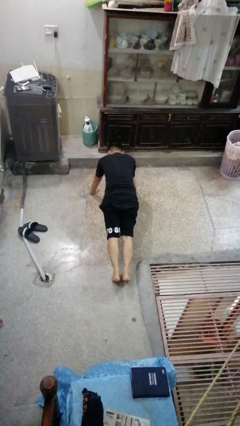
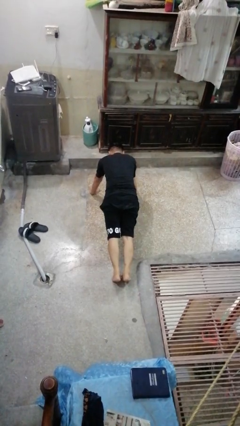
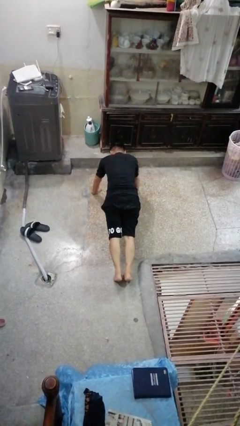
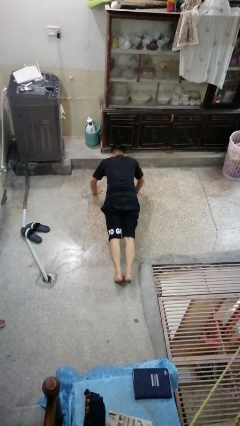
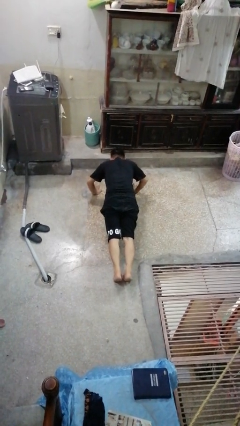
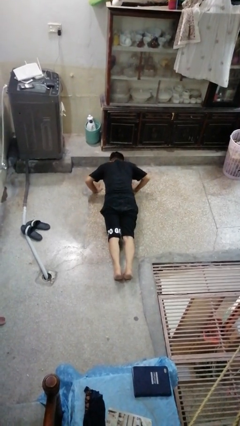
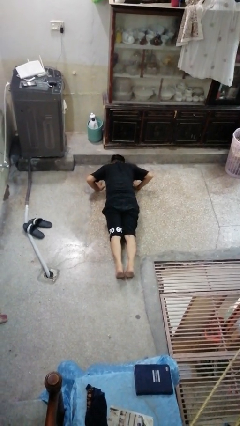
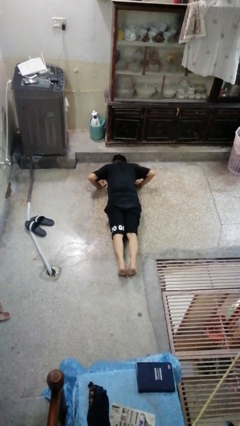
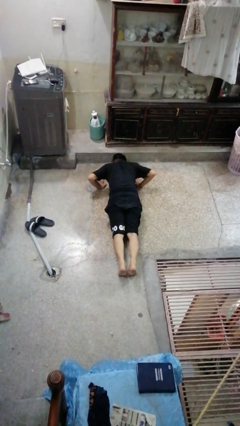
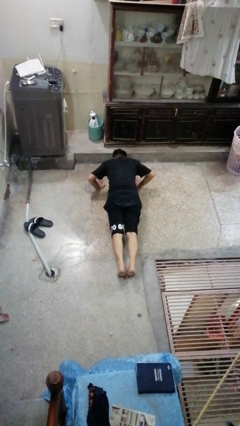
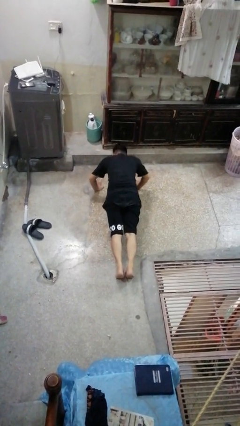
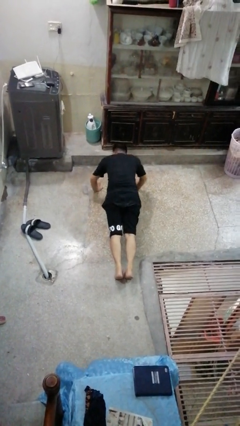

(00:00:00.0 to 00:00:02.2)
person exercises with pushup

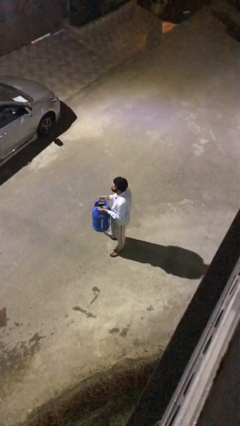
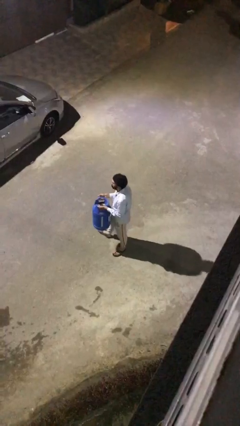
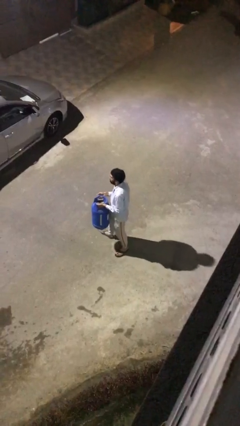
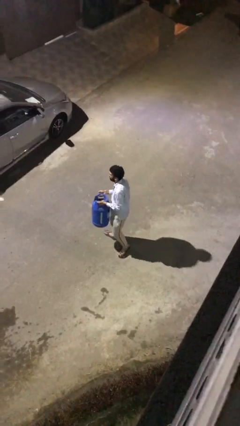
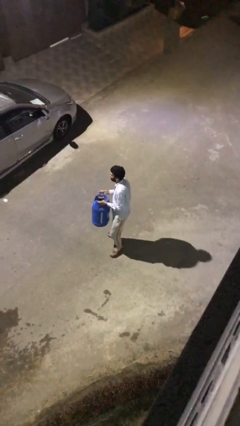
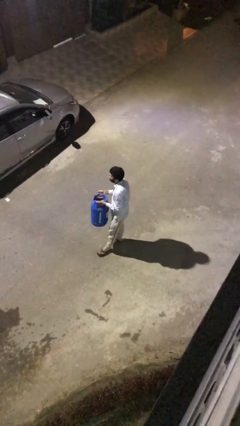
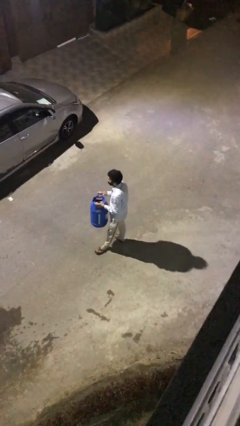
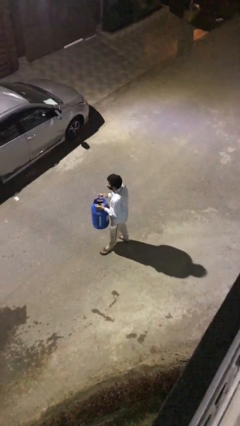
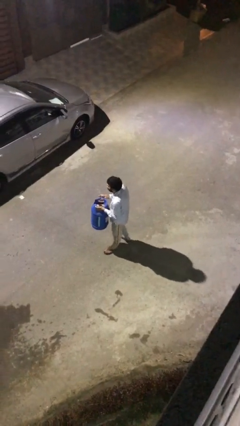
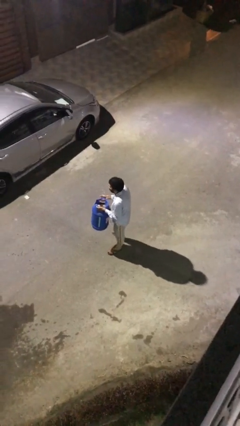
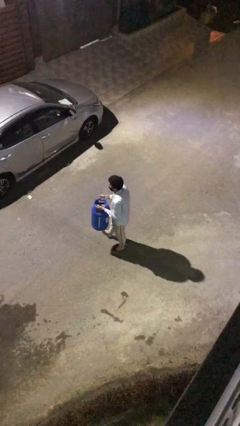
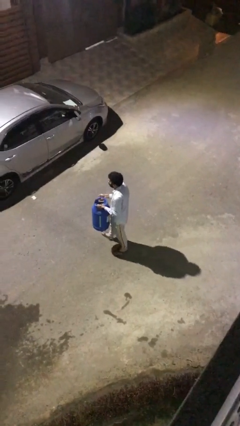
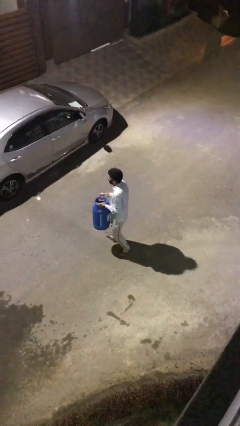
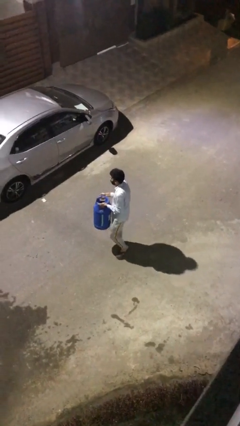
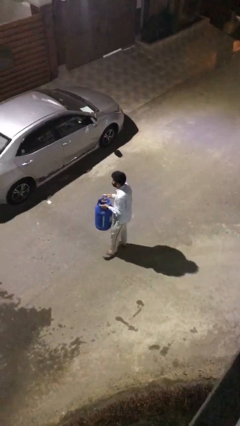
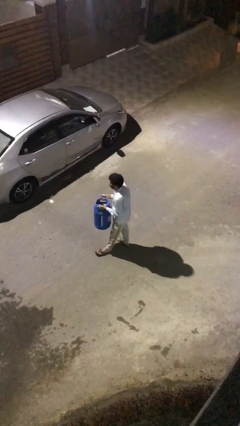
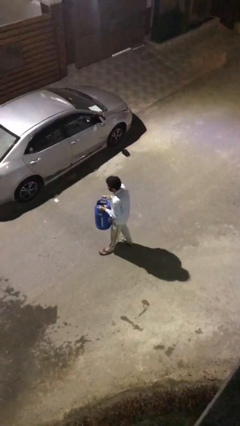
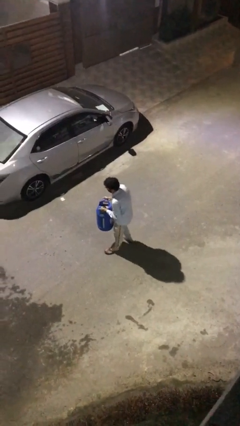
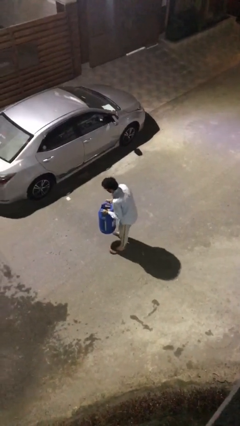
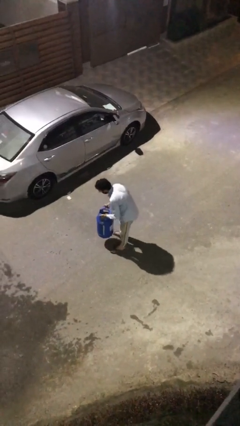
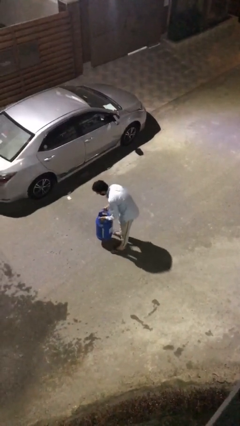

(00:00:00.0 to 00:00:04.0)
person carries heavy object

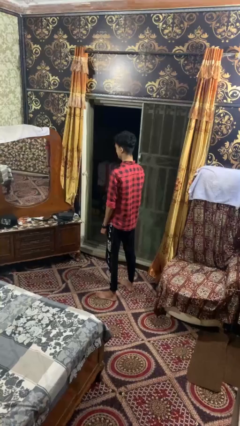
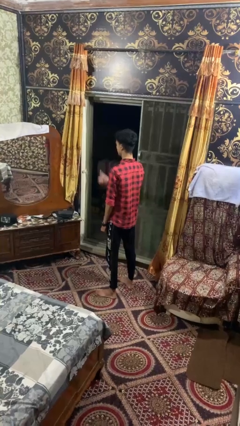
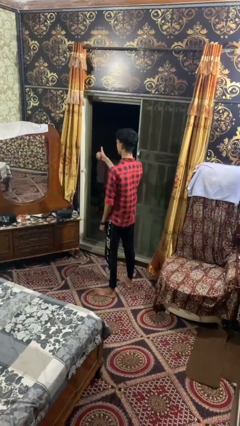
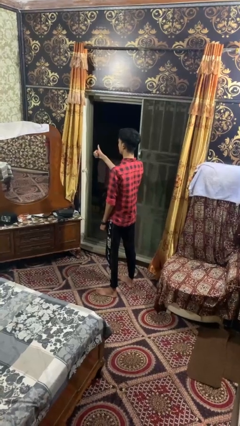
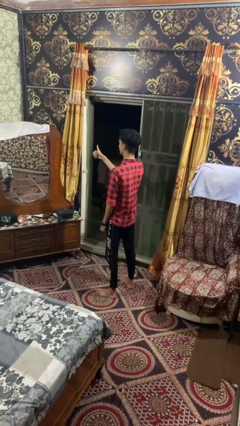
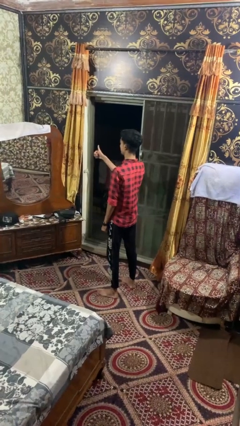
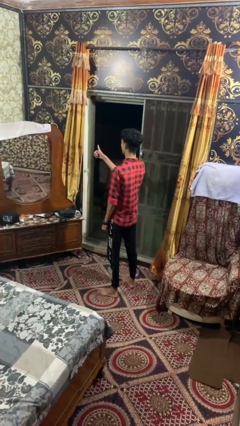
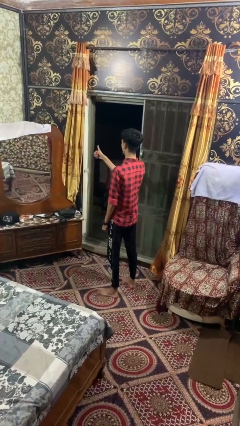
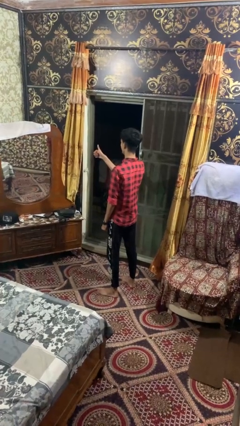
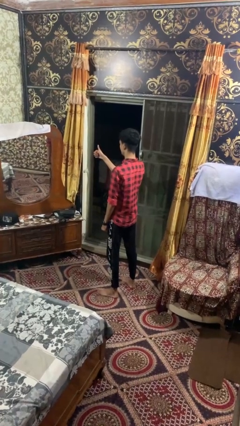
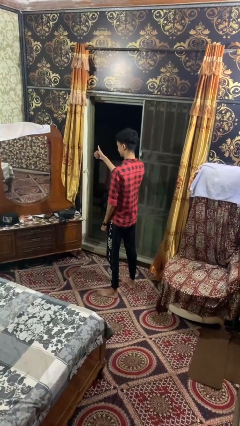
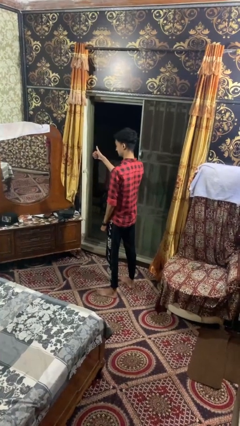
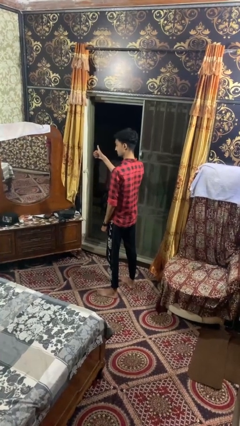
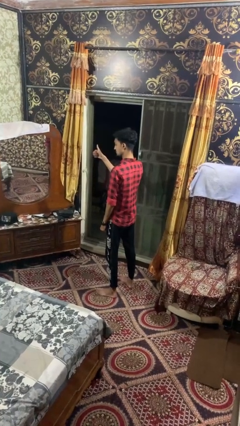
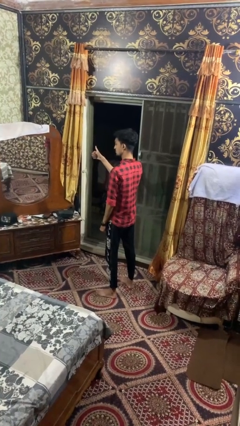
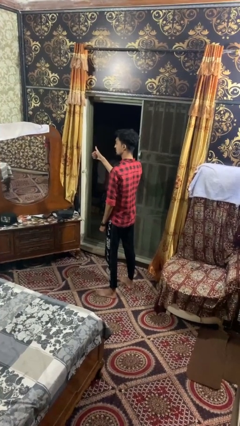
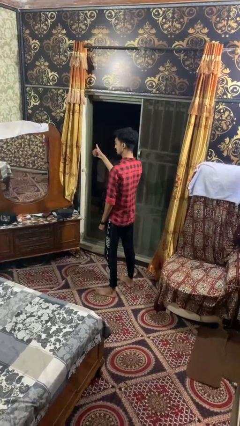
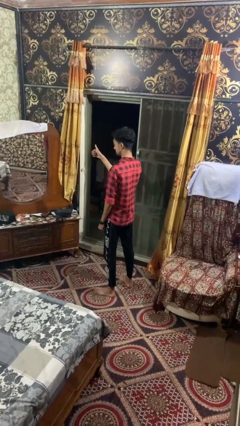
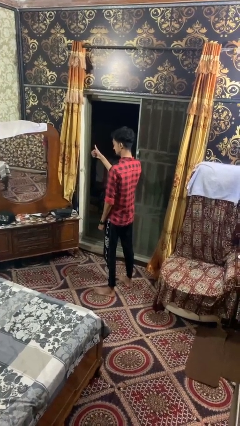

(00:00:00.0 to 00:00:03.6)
person gestures thumbs up

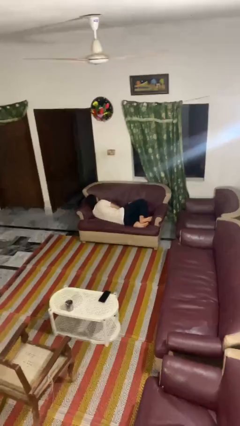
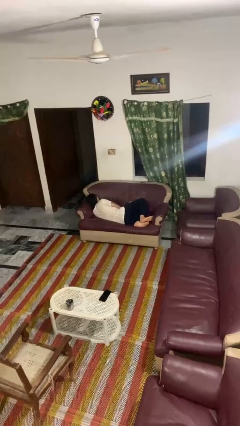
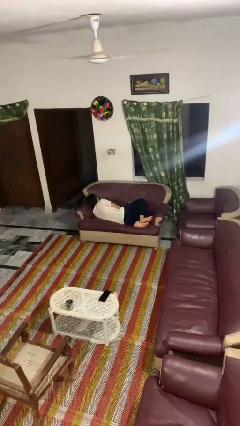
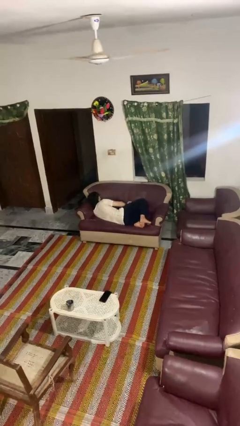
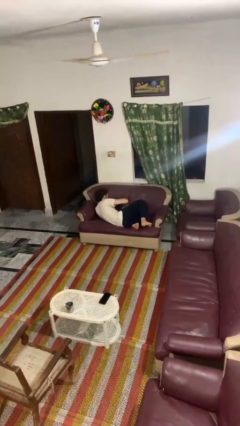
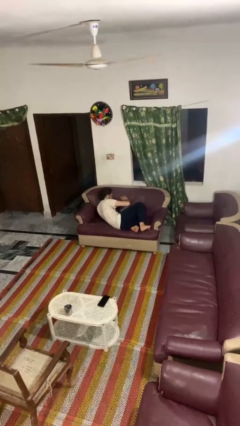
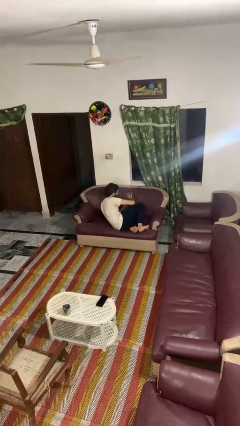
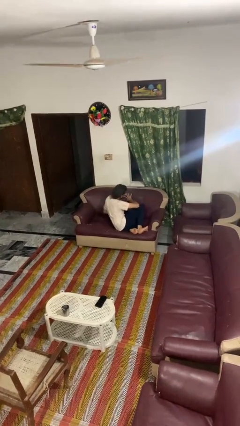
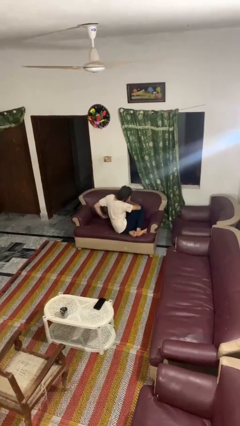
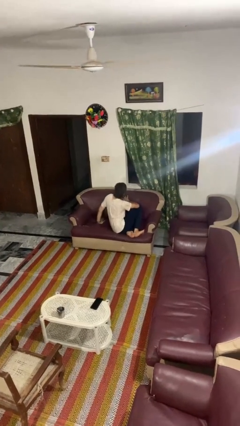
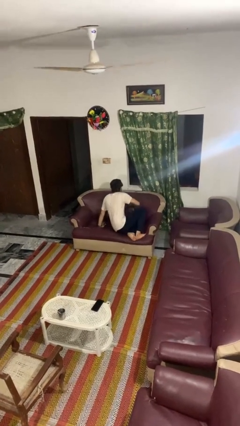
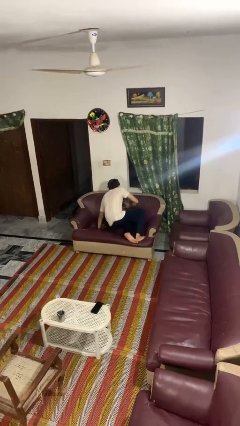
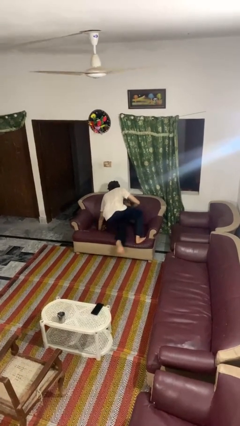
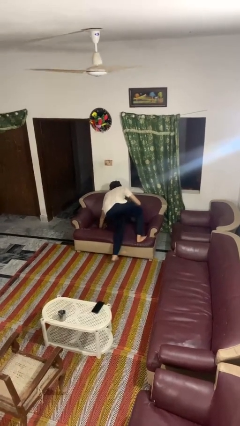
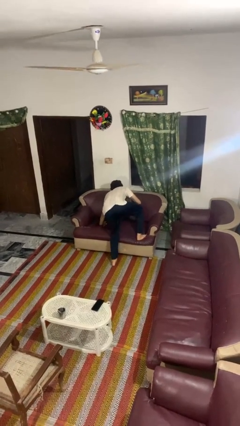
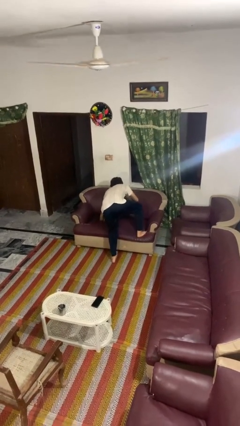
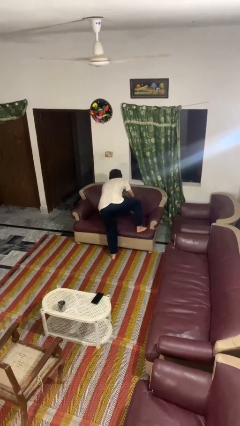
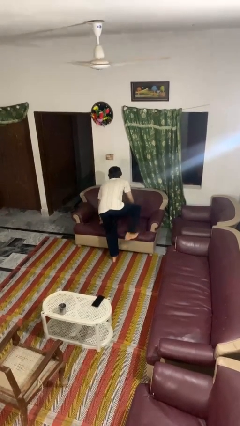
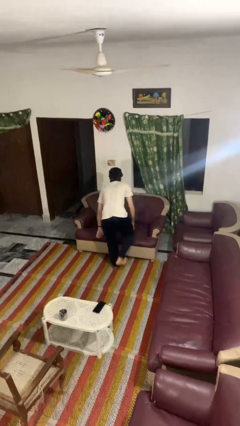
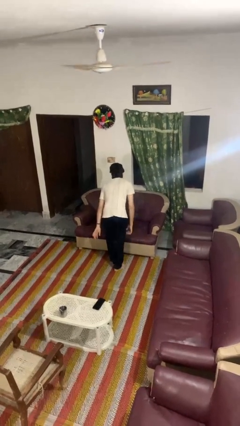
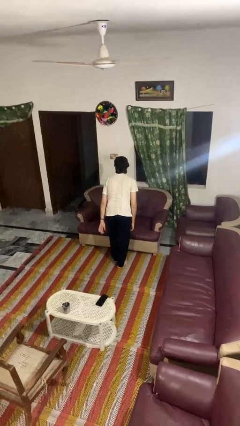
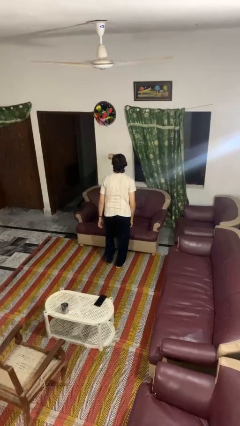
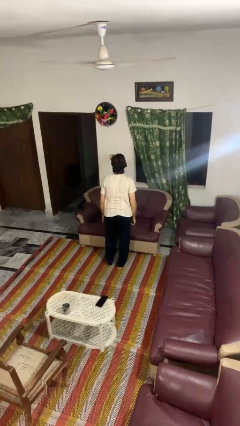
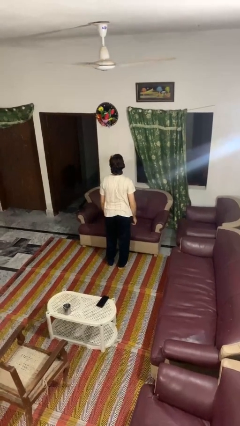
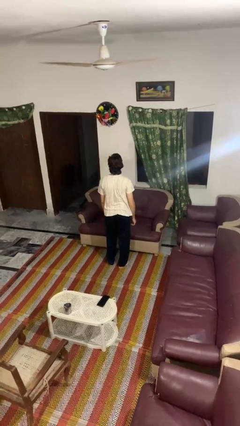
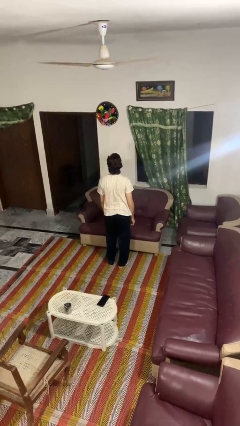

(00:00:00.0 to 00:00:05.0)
person stands up

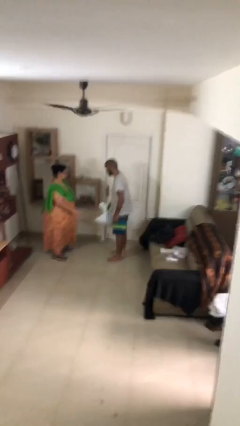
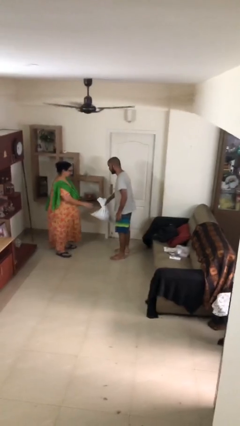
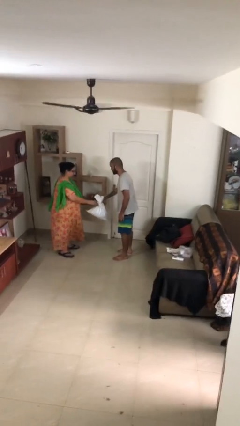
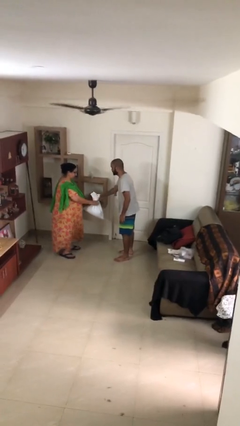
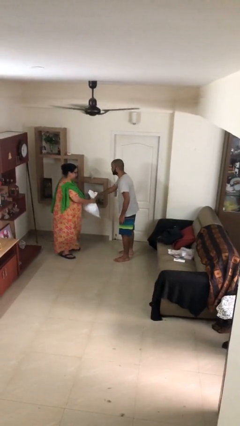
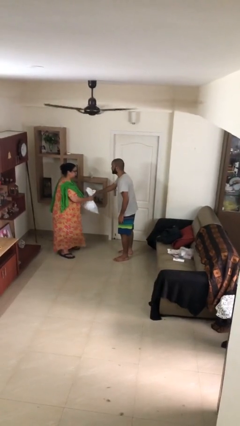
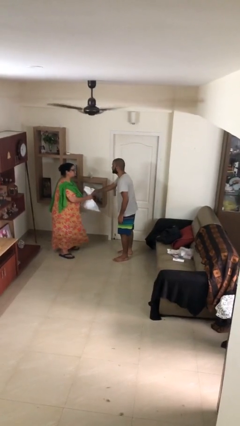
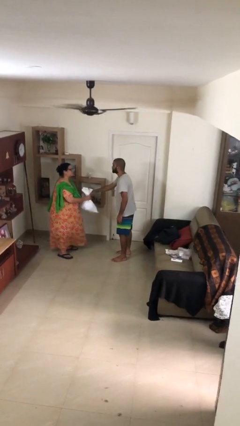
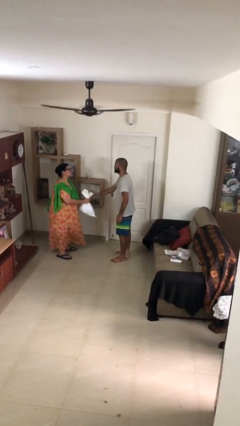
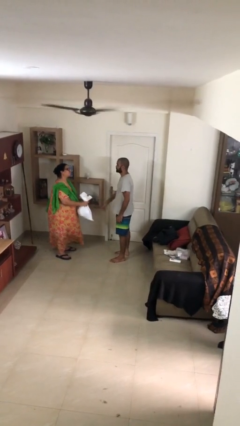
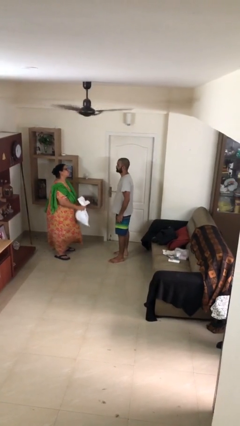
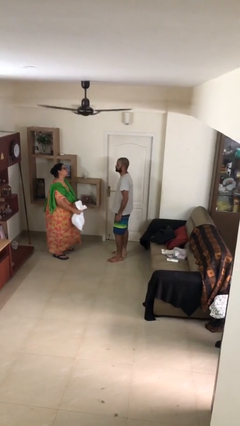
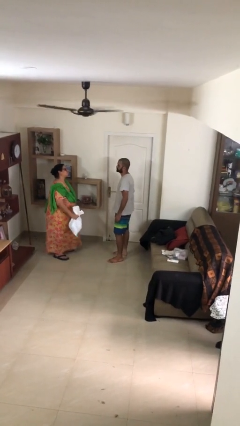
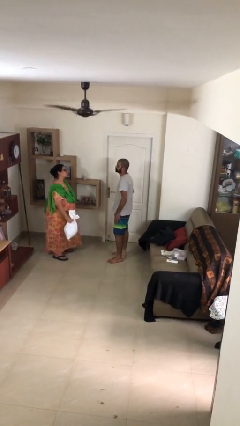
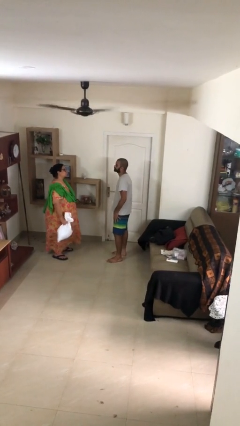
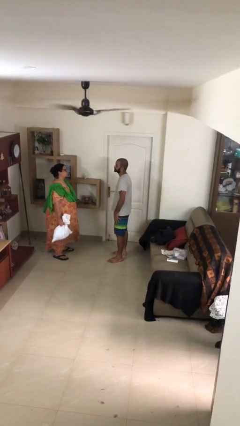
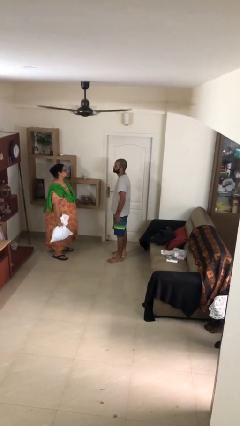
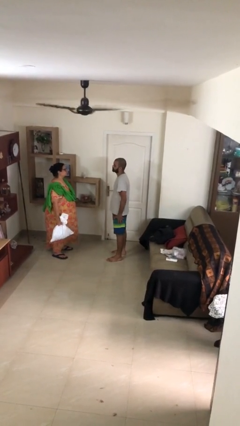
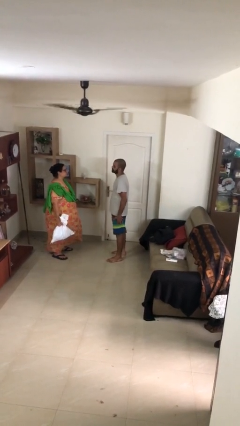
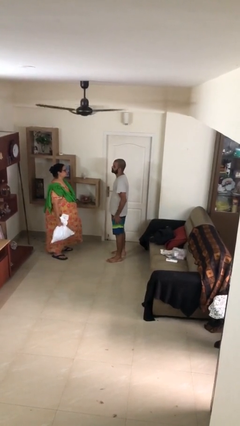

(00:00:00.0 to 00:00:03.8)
person transfers object to person
